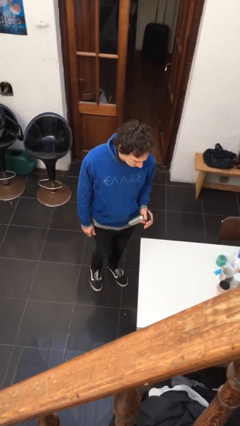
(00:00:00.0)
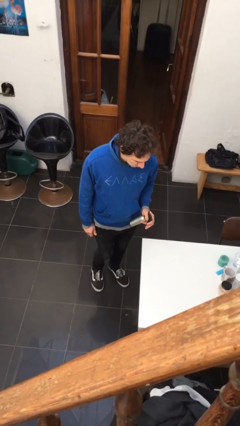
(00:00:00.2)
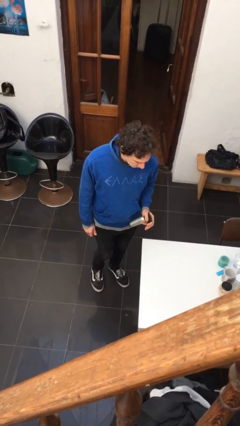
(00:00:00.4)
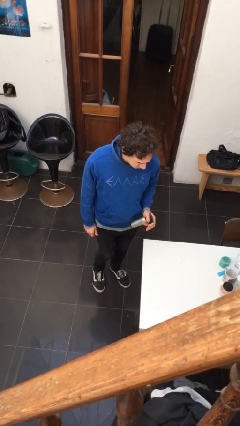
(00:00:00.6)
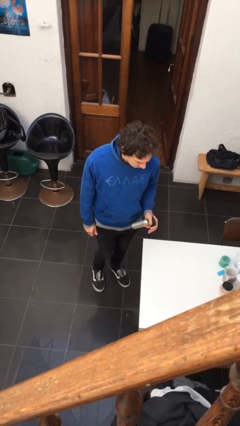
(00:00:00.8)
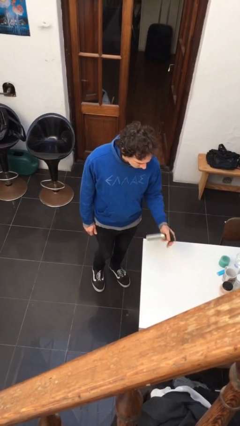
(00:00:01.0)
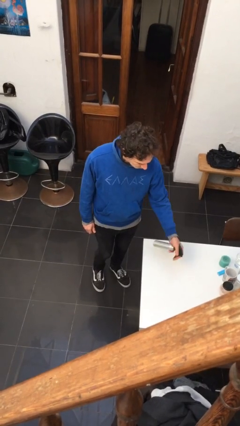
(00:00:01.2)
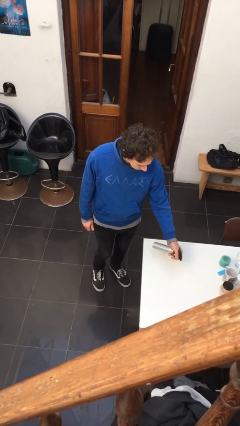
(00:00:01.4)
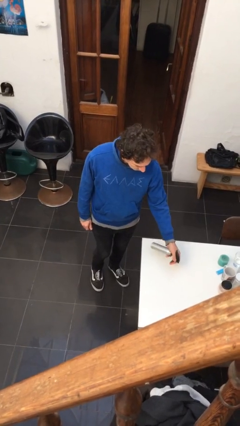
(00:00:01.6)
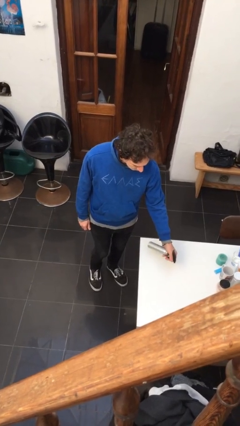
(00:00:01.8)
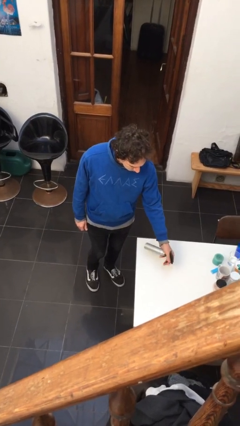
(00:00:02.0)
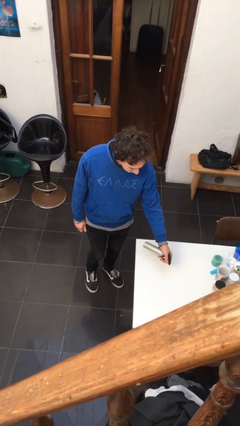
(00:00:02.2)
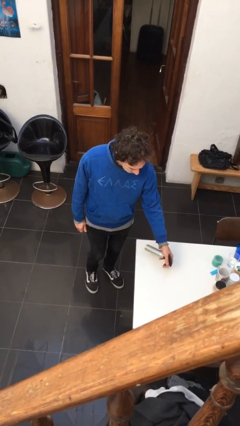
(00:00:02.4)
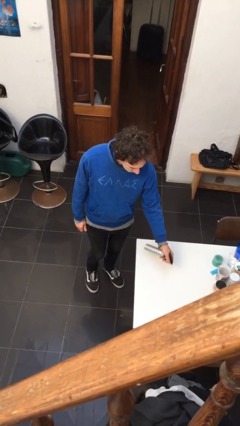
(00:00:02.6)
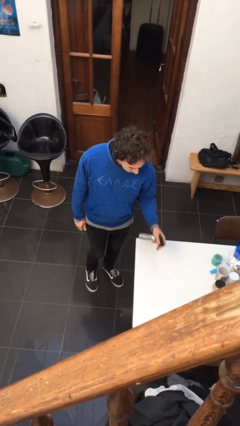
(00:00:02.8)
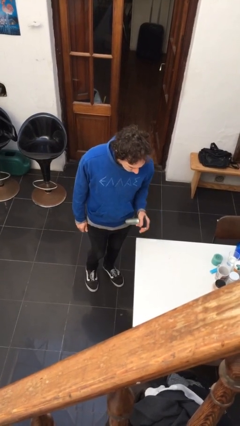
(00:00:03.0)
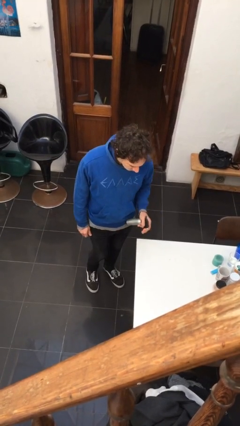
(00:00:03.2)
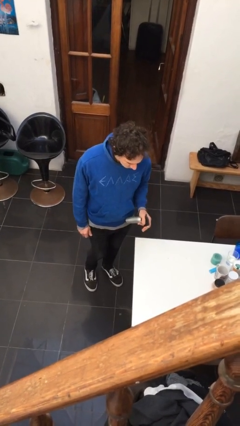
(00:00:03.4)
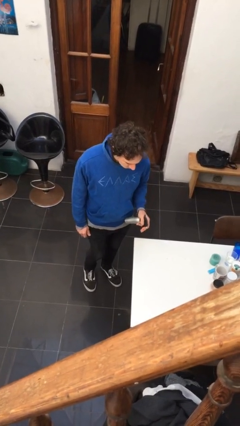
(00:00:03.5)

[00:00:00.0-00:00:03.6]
person sprays from bottle

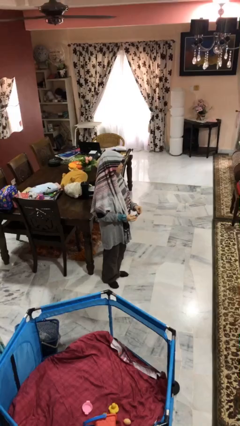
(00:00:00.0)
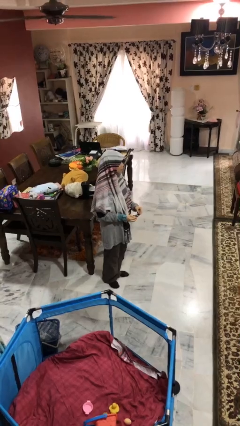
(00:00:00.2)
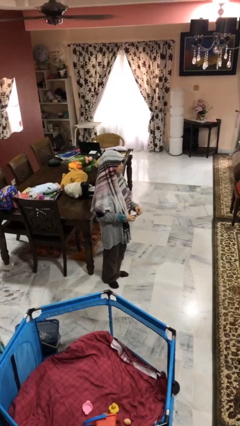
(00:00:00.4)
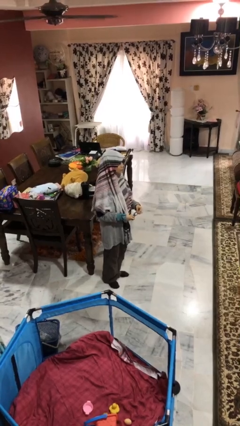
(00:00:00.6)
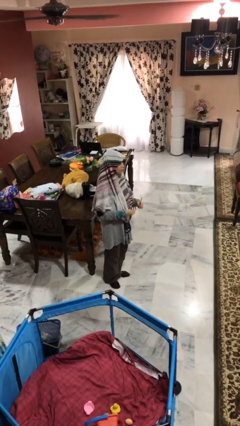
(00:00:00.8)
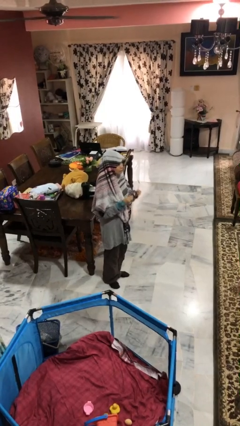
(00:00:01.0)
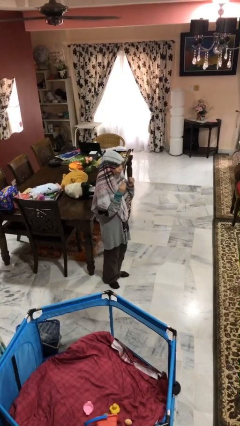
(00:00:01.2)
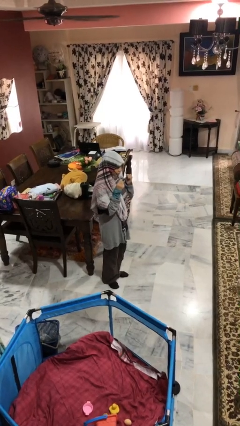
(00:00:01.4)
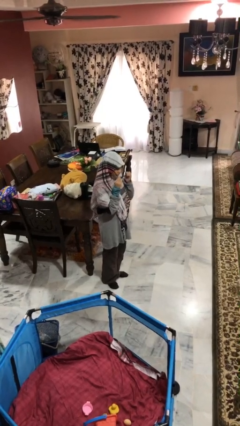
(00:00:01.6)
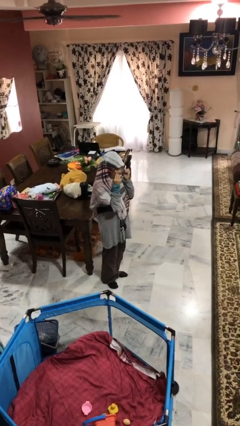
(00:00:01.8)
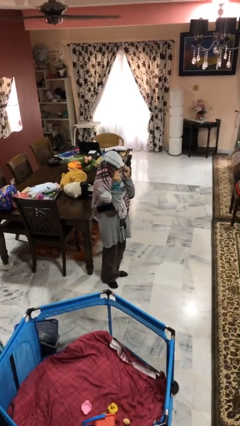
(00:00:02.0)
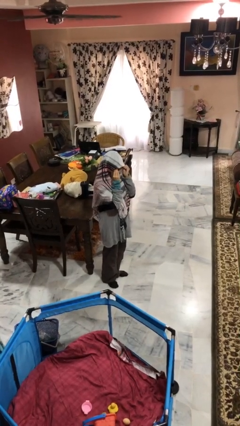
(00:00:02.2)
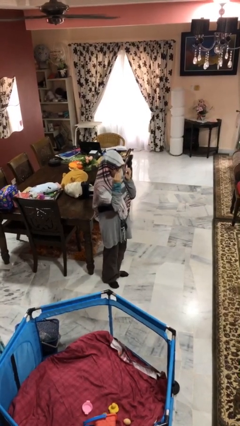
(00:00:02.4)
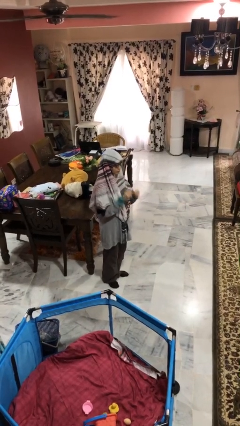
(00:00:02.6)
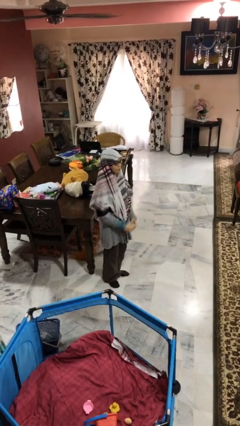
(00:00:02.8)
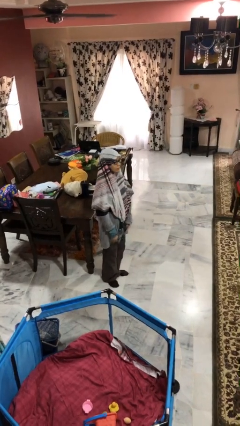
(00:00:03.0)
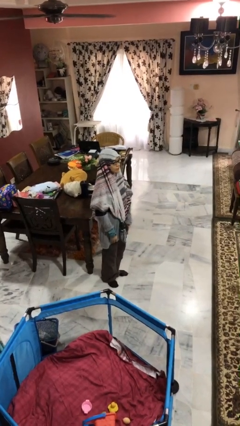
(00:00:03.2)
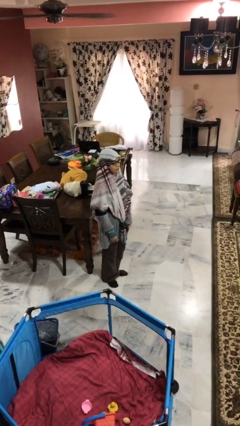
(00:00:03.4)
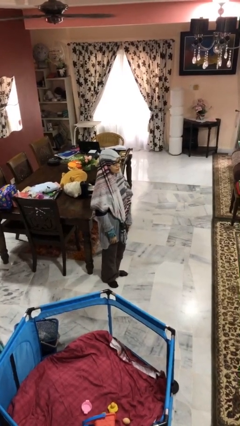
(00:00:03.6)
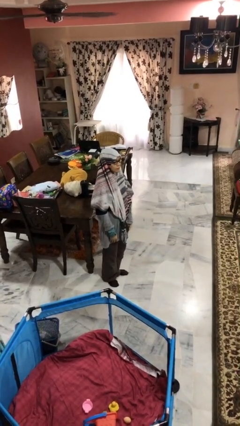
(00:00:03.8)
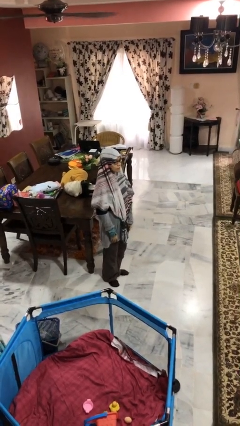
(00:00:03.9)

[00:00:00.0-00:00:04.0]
person puts on glasses

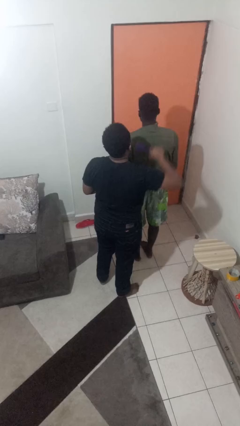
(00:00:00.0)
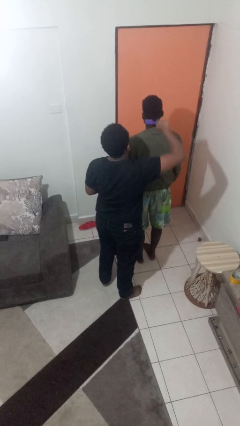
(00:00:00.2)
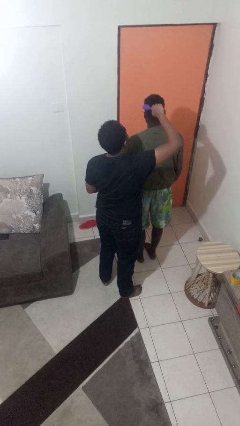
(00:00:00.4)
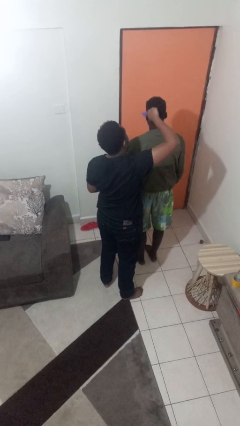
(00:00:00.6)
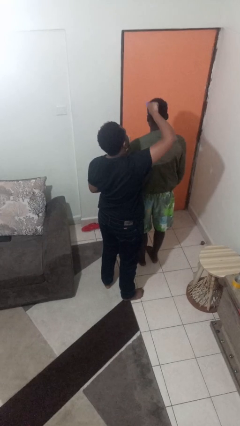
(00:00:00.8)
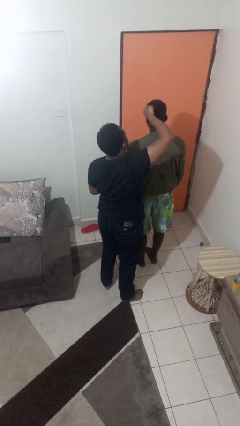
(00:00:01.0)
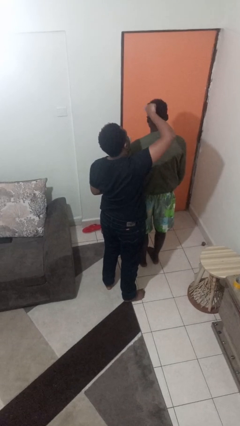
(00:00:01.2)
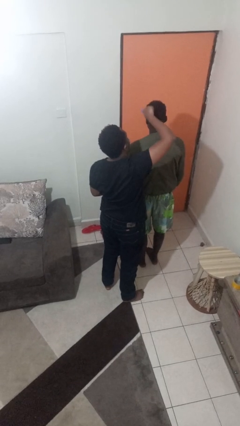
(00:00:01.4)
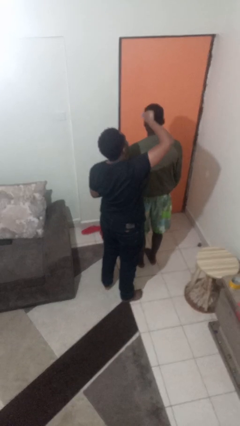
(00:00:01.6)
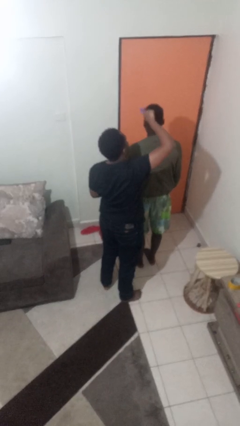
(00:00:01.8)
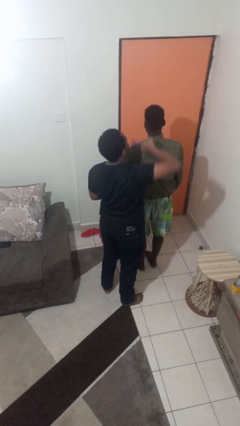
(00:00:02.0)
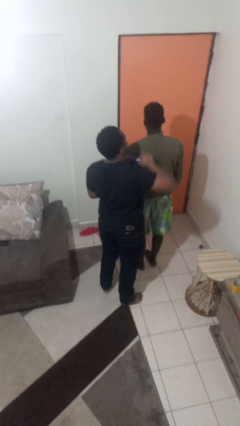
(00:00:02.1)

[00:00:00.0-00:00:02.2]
person brushes hair of person

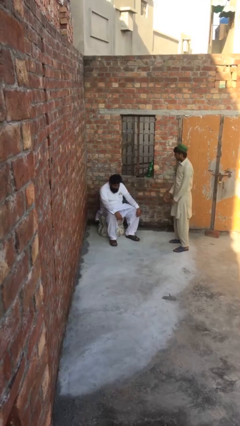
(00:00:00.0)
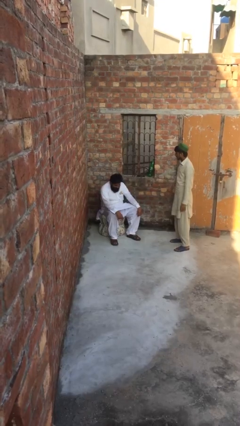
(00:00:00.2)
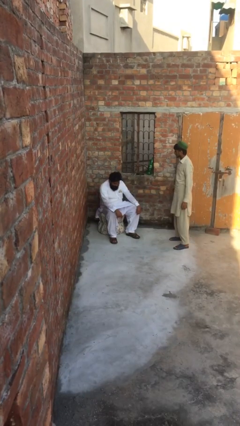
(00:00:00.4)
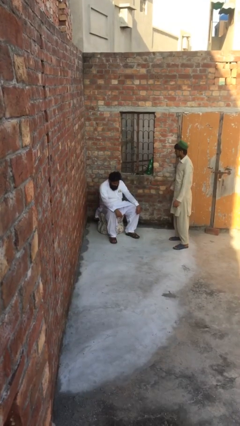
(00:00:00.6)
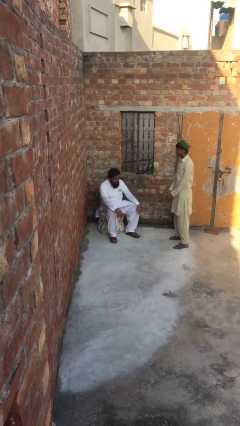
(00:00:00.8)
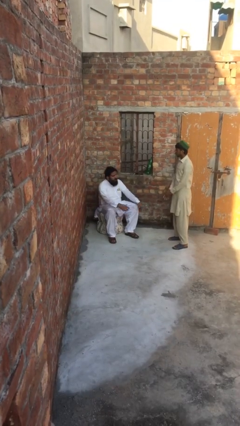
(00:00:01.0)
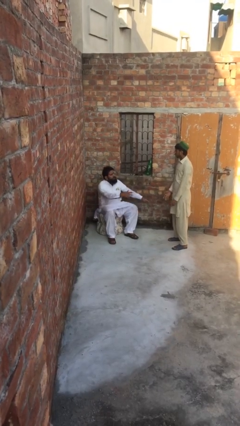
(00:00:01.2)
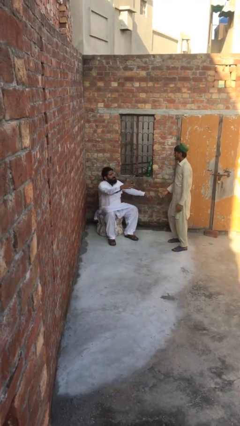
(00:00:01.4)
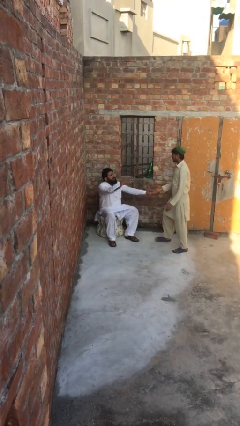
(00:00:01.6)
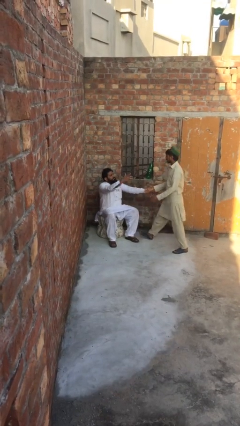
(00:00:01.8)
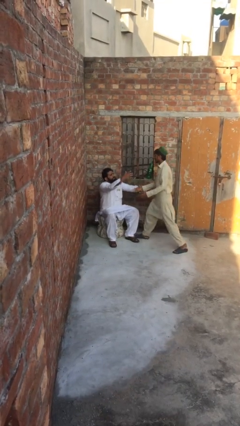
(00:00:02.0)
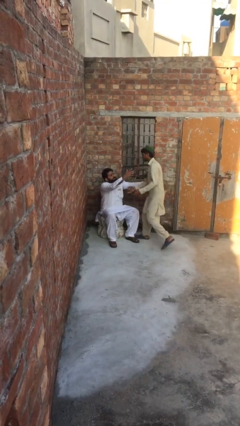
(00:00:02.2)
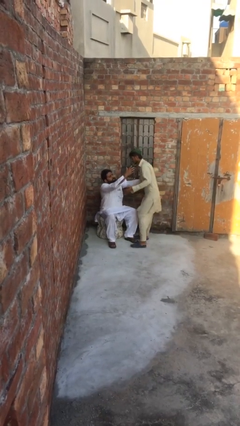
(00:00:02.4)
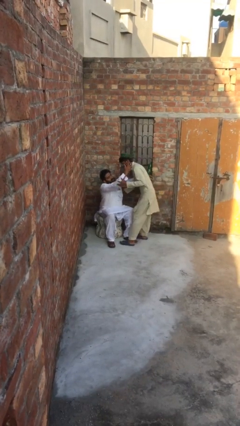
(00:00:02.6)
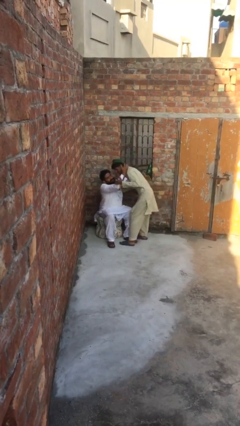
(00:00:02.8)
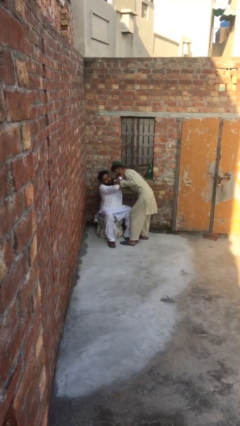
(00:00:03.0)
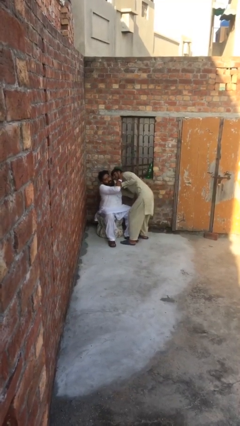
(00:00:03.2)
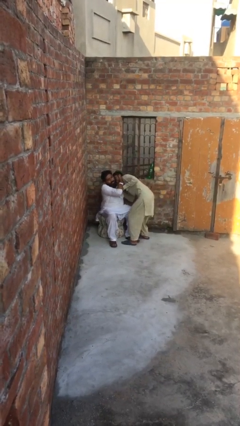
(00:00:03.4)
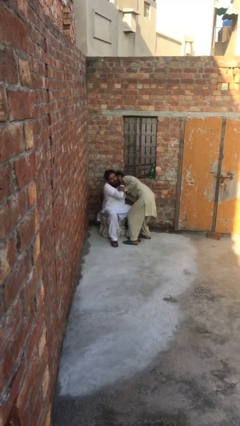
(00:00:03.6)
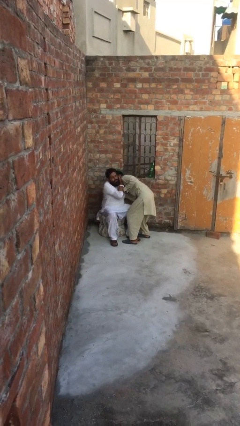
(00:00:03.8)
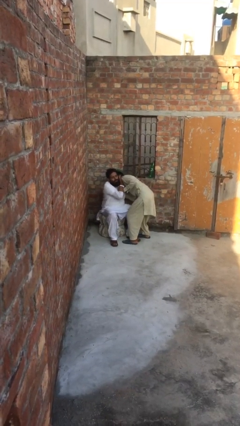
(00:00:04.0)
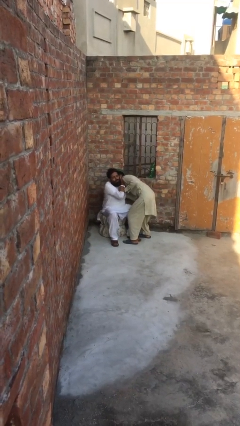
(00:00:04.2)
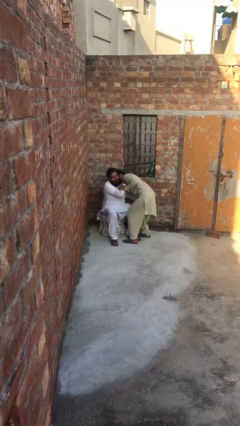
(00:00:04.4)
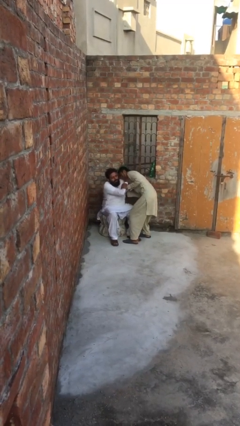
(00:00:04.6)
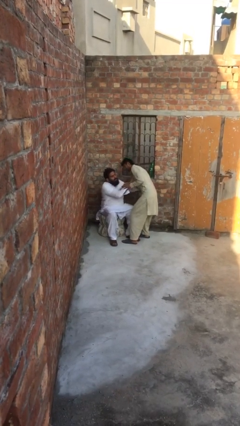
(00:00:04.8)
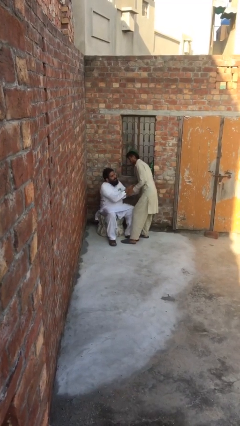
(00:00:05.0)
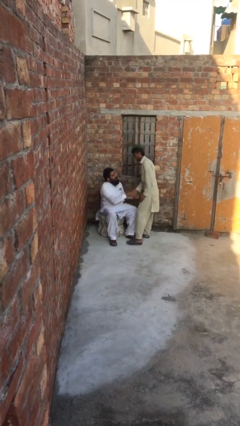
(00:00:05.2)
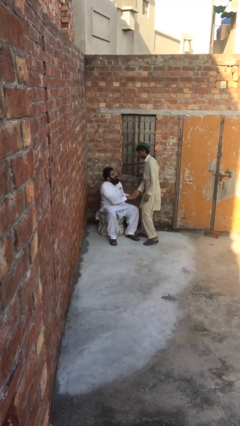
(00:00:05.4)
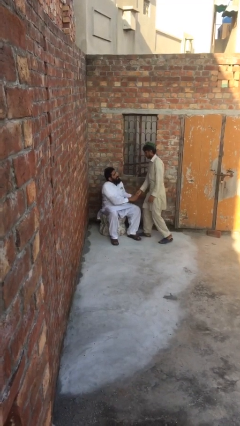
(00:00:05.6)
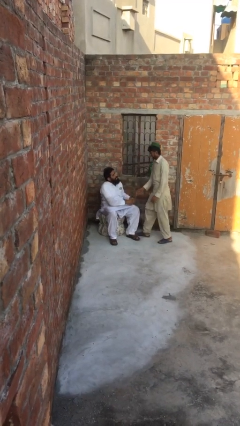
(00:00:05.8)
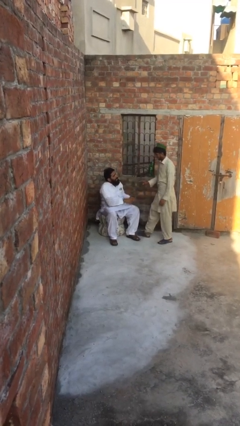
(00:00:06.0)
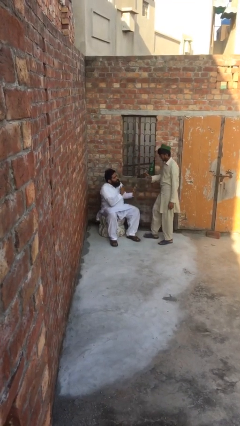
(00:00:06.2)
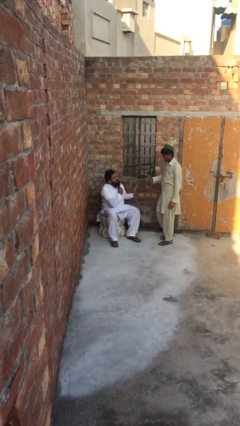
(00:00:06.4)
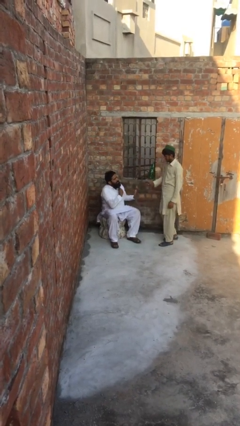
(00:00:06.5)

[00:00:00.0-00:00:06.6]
person embraces person

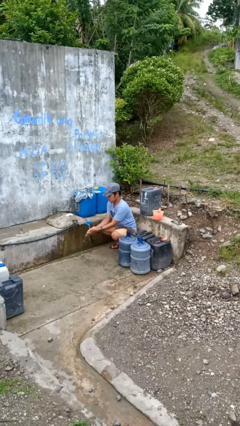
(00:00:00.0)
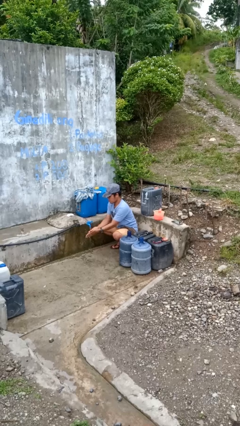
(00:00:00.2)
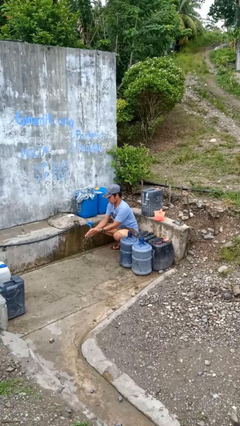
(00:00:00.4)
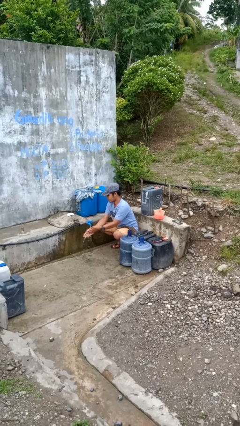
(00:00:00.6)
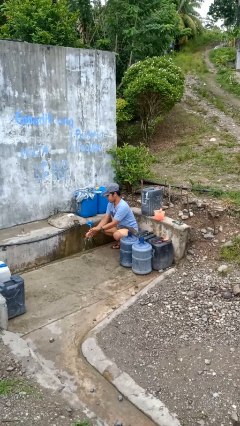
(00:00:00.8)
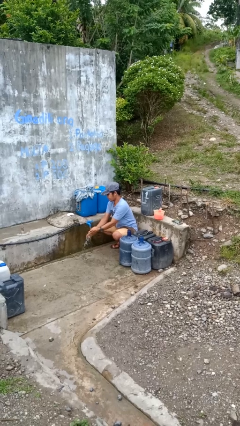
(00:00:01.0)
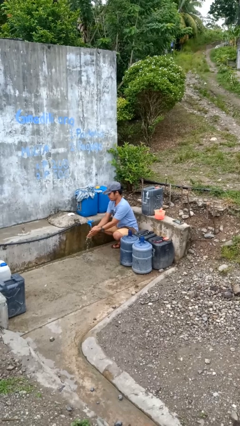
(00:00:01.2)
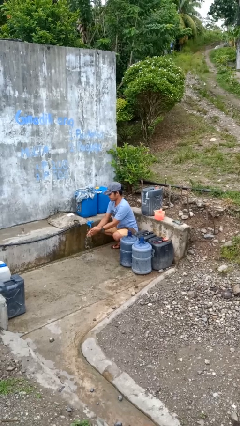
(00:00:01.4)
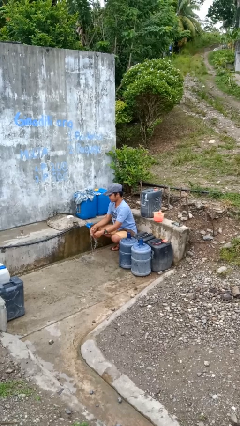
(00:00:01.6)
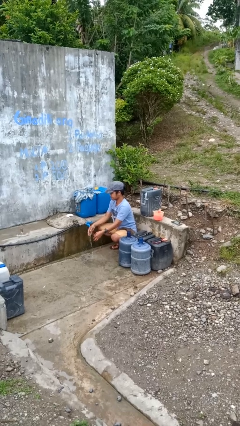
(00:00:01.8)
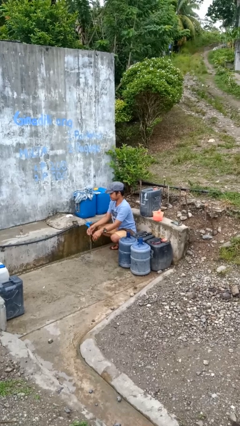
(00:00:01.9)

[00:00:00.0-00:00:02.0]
person washes hands
